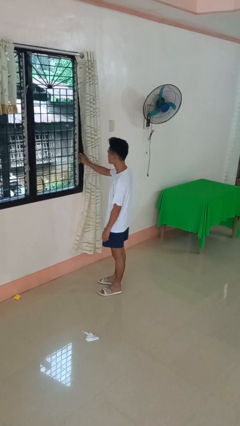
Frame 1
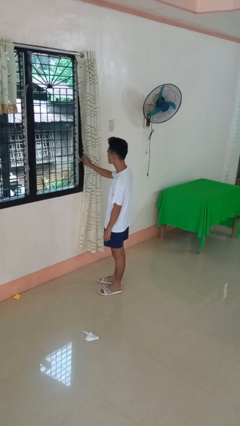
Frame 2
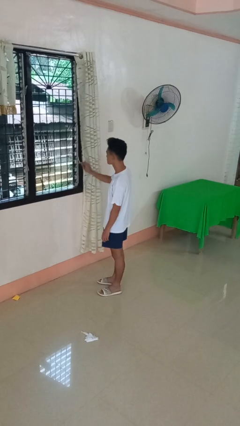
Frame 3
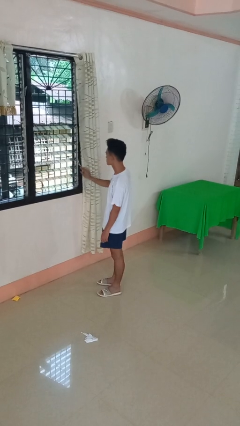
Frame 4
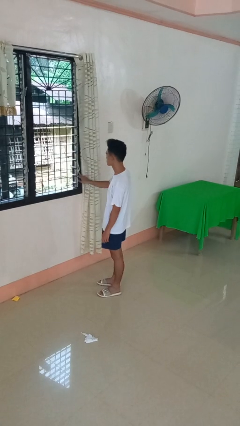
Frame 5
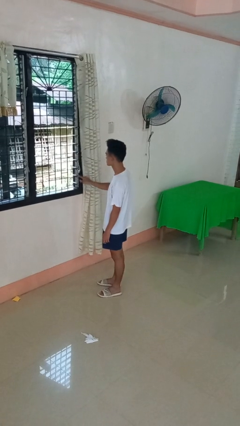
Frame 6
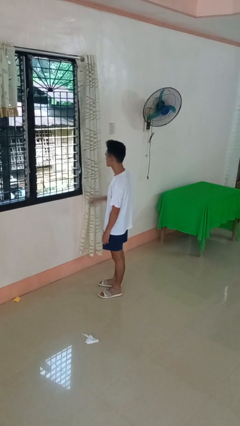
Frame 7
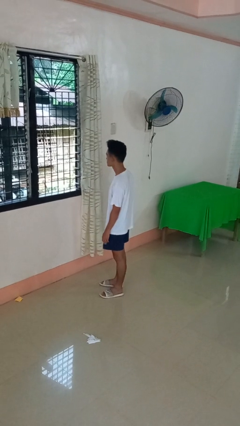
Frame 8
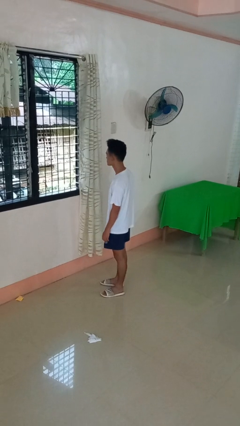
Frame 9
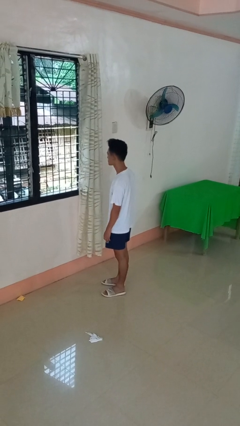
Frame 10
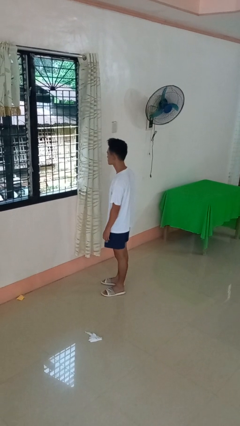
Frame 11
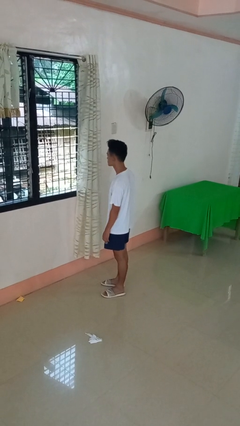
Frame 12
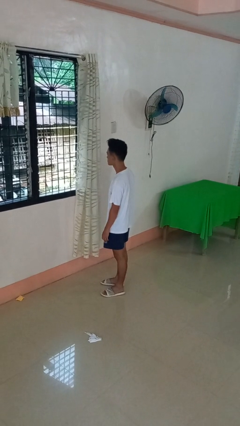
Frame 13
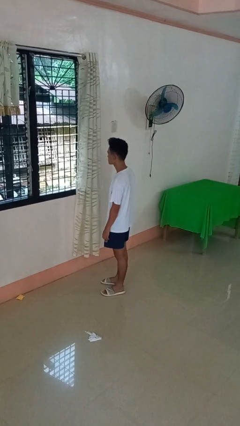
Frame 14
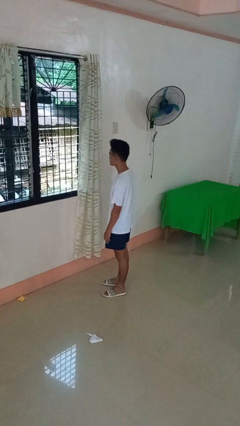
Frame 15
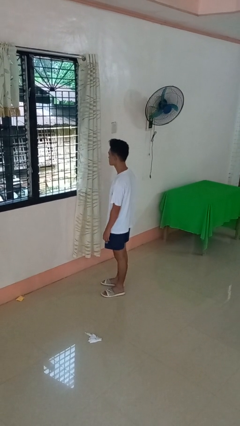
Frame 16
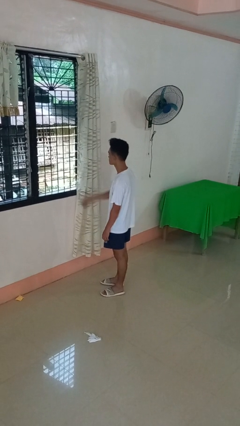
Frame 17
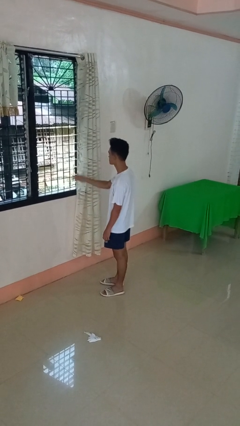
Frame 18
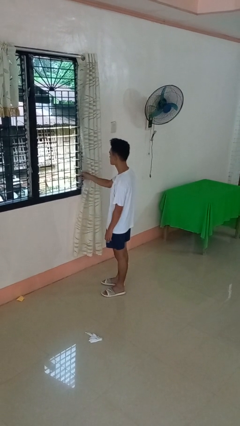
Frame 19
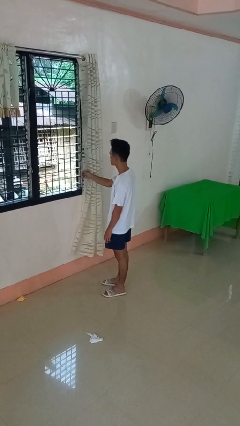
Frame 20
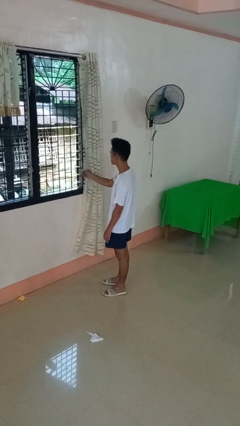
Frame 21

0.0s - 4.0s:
person opens home window

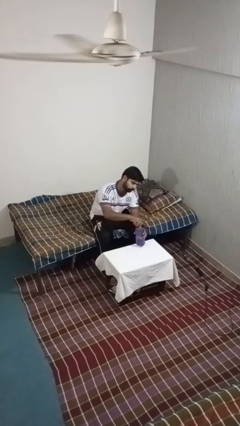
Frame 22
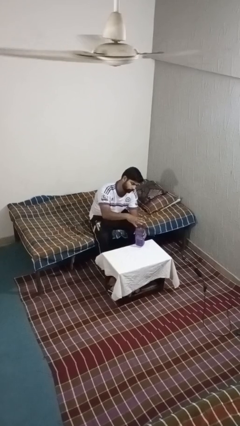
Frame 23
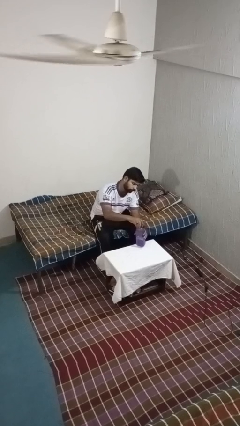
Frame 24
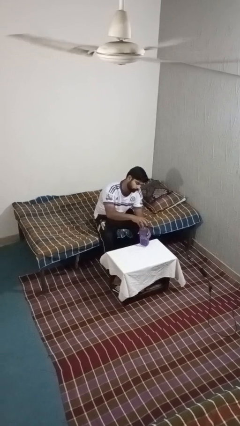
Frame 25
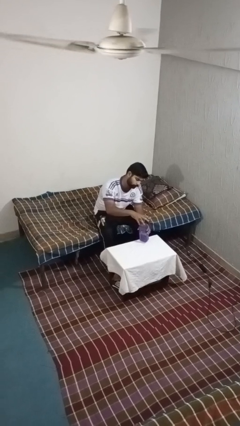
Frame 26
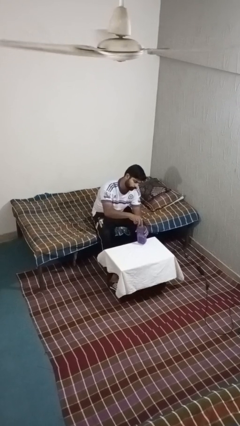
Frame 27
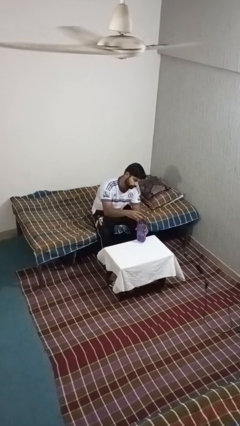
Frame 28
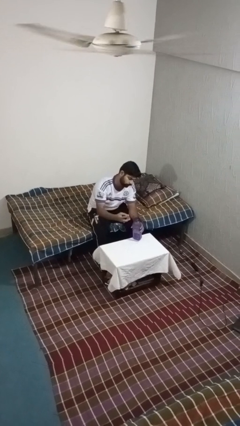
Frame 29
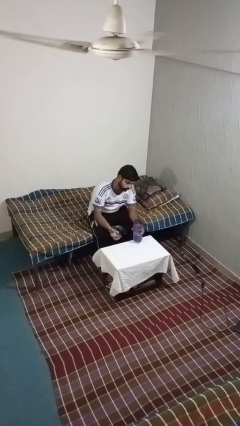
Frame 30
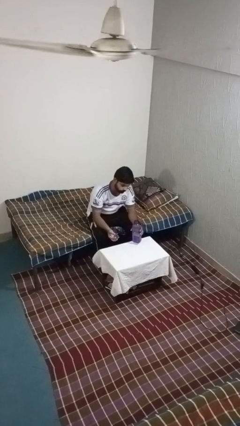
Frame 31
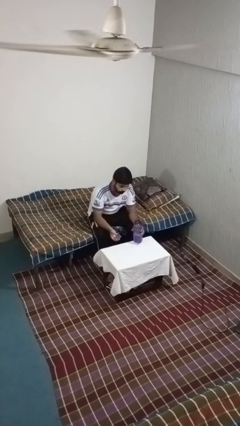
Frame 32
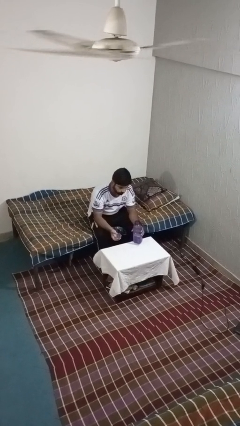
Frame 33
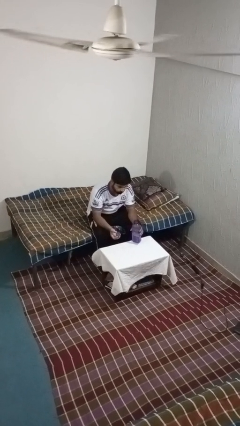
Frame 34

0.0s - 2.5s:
person unscrews lid from bottle

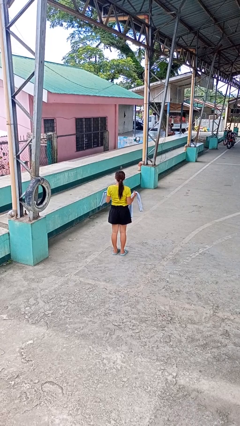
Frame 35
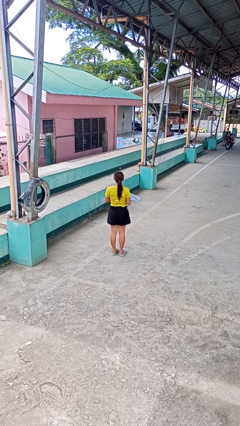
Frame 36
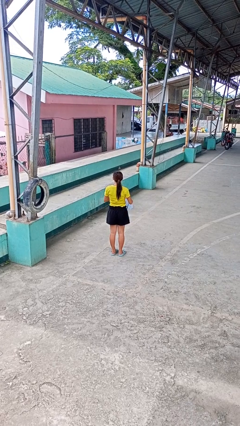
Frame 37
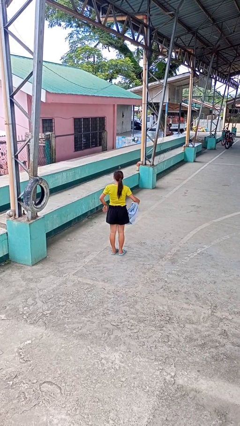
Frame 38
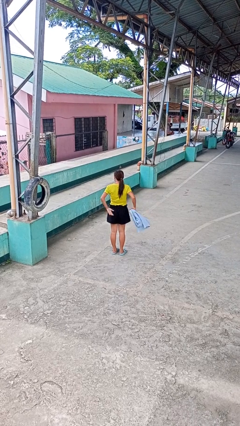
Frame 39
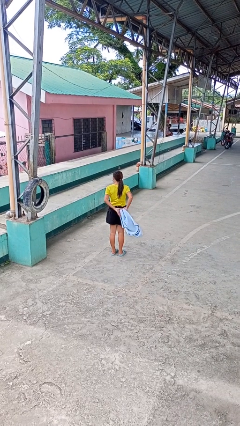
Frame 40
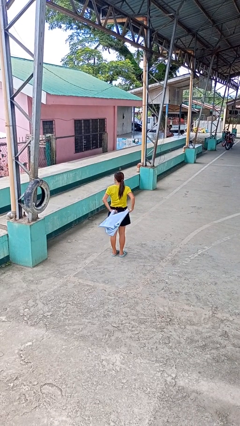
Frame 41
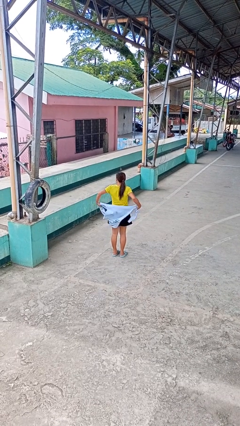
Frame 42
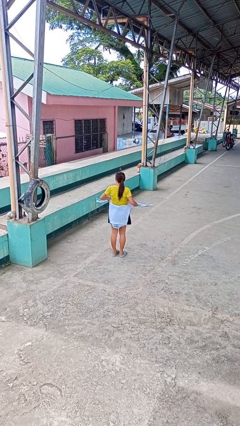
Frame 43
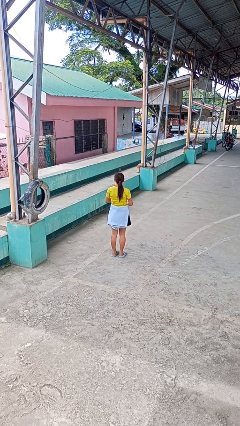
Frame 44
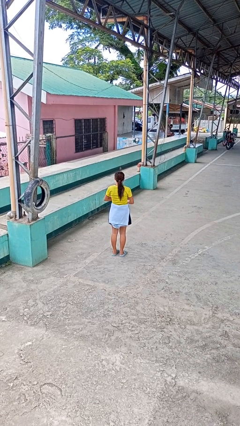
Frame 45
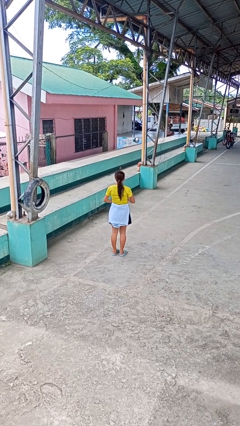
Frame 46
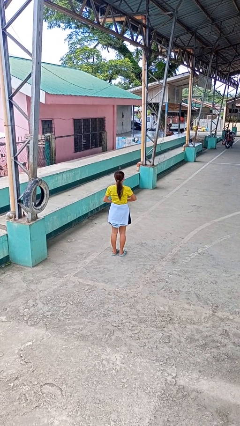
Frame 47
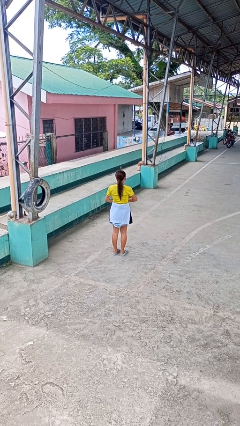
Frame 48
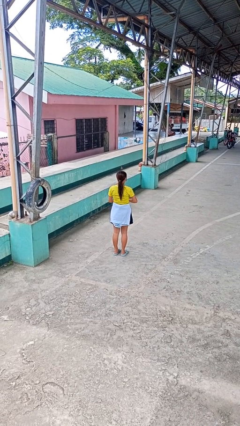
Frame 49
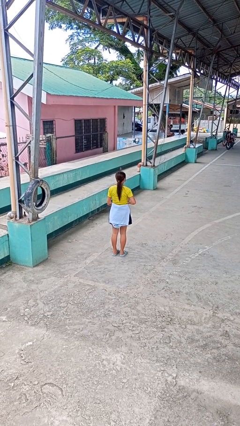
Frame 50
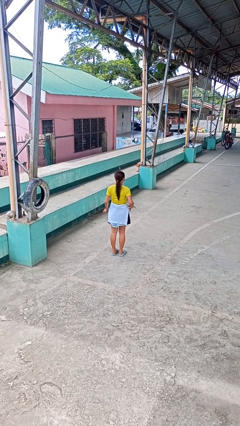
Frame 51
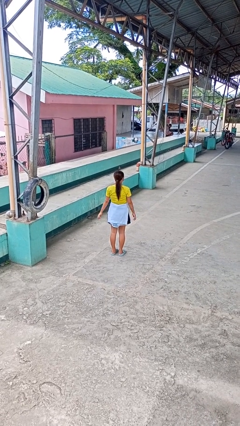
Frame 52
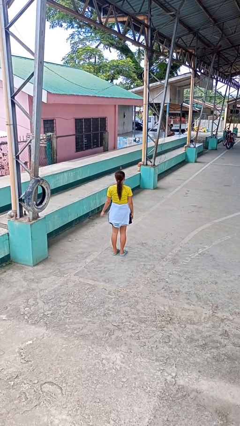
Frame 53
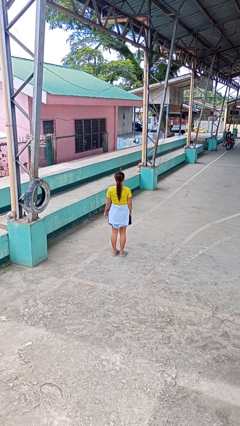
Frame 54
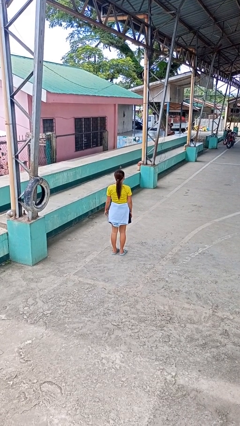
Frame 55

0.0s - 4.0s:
person ties jacket around waist

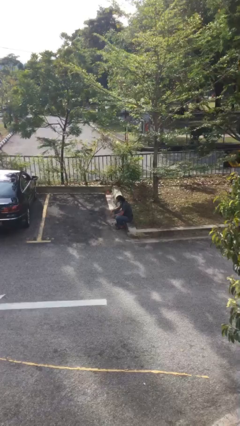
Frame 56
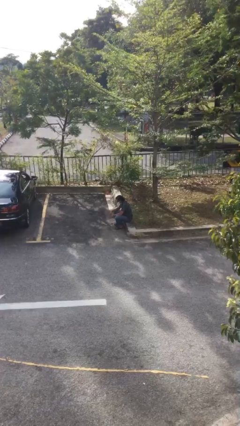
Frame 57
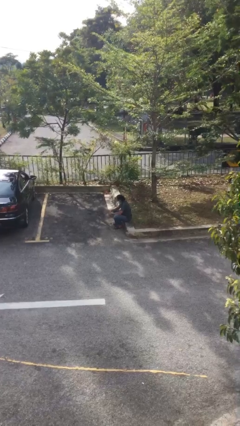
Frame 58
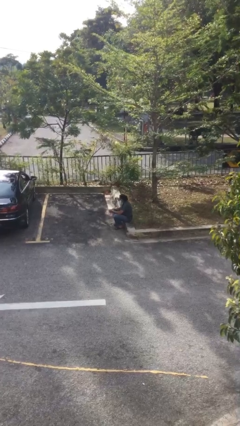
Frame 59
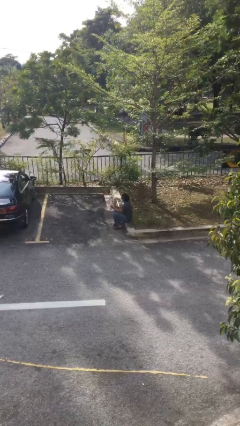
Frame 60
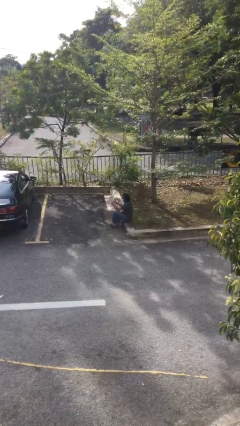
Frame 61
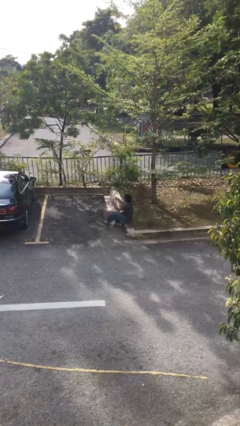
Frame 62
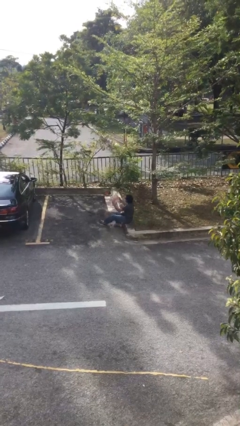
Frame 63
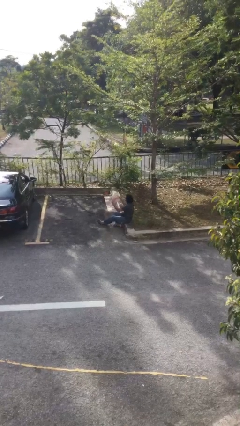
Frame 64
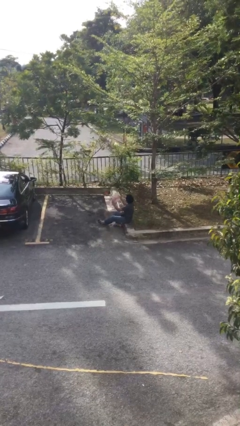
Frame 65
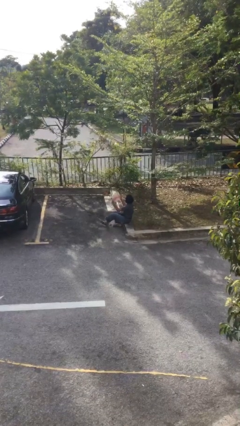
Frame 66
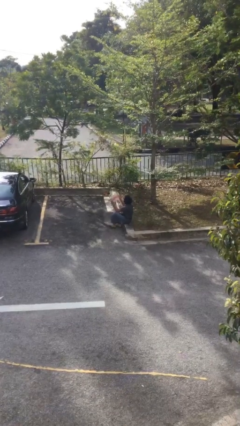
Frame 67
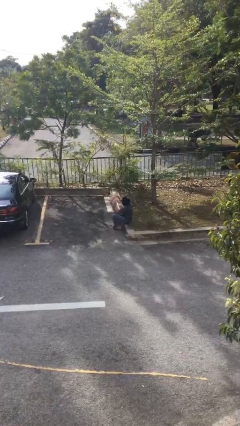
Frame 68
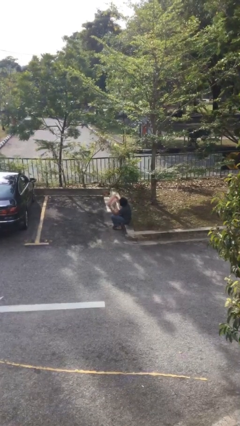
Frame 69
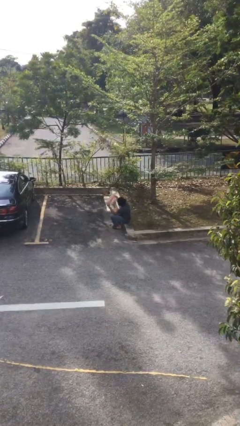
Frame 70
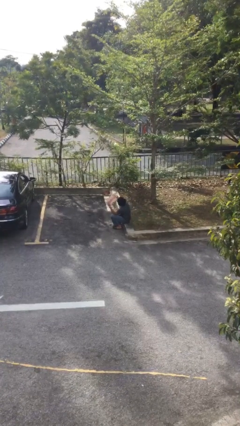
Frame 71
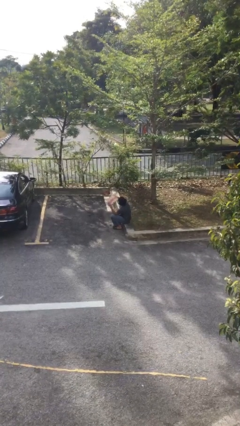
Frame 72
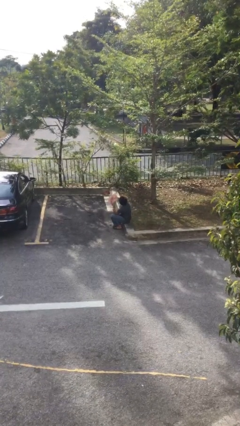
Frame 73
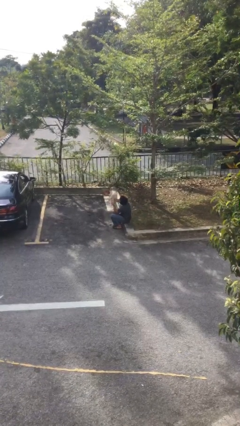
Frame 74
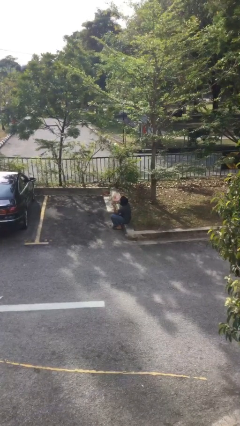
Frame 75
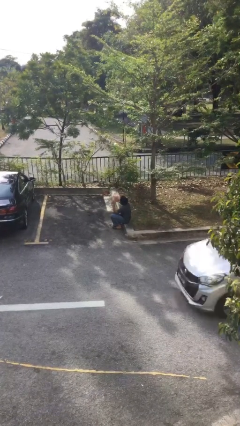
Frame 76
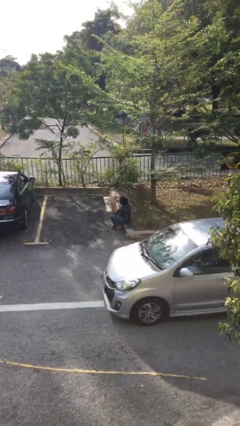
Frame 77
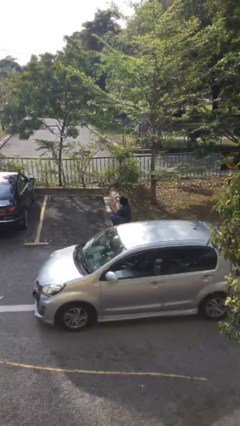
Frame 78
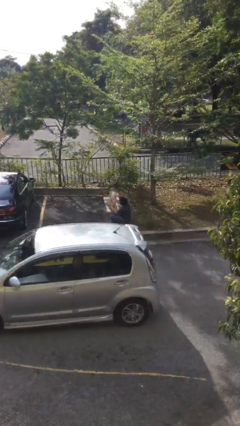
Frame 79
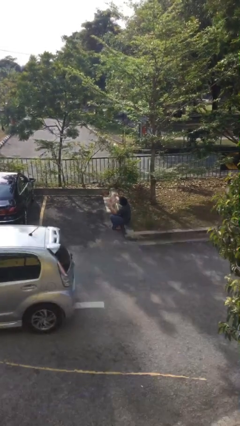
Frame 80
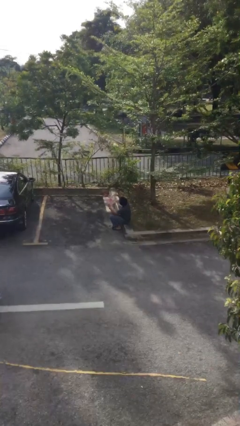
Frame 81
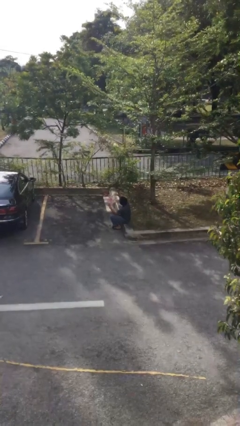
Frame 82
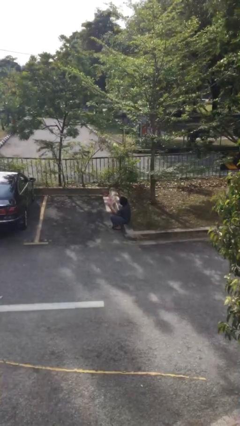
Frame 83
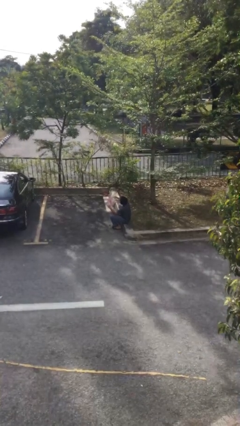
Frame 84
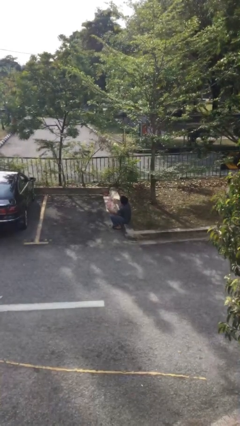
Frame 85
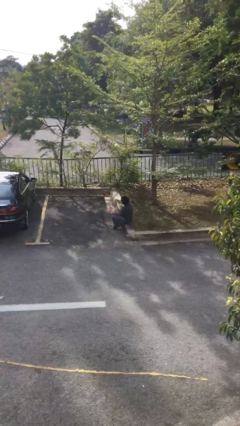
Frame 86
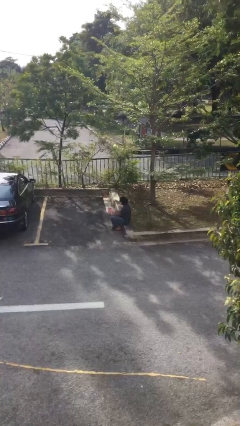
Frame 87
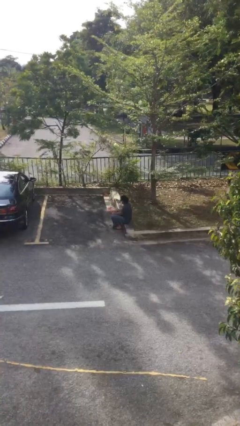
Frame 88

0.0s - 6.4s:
person reads document

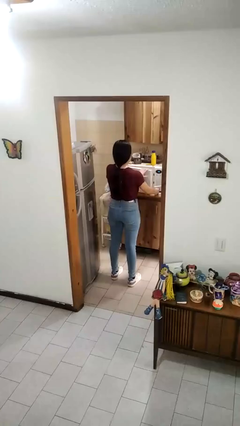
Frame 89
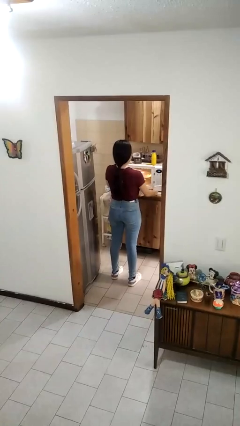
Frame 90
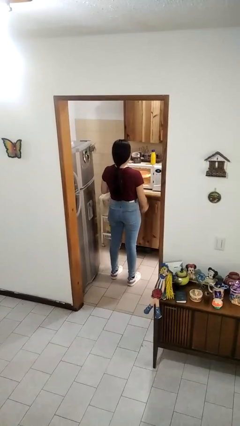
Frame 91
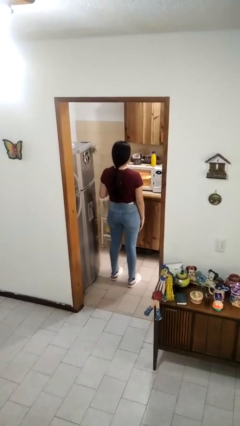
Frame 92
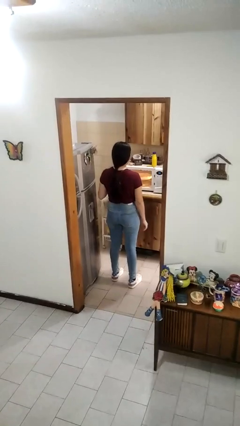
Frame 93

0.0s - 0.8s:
person opens microwave

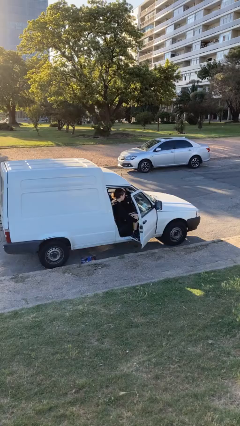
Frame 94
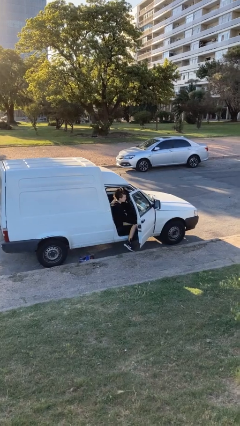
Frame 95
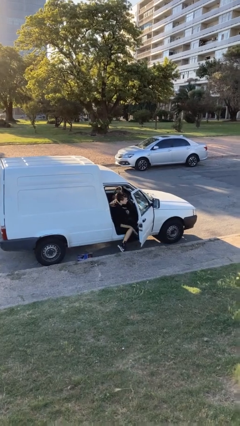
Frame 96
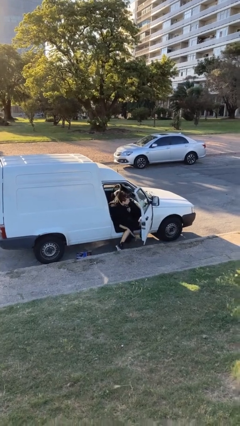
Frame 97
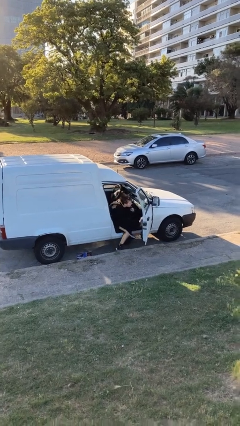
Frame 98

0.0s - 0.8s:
person opens car door
